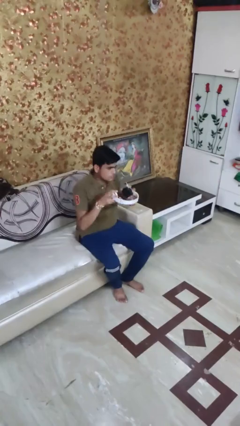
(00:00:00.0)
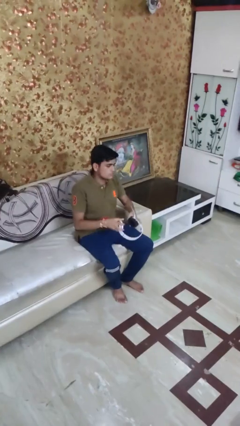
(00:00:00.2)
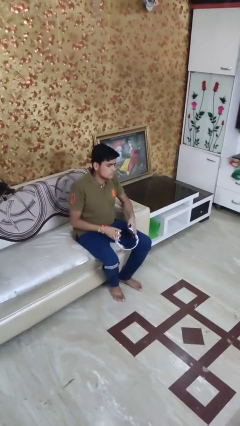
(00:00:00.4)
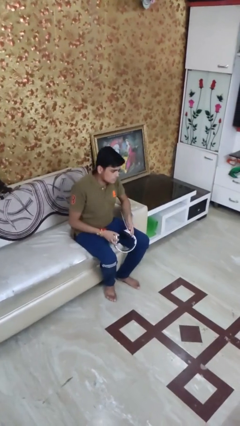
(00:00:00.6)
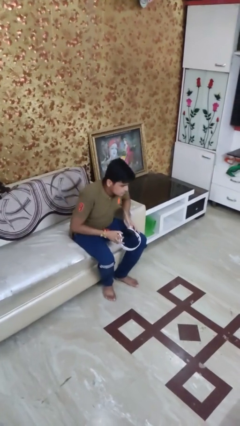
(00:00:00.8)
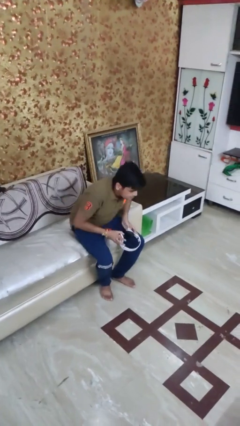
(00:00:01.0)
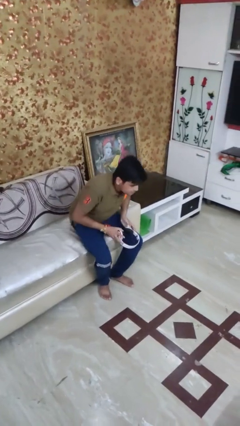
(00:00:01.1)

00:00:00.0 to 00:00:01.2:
person takes off headphones

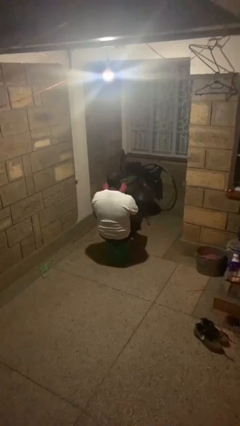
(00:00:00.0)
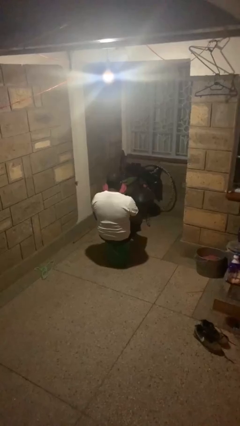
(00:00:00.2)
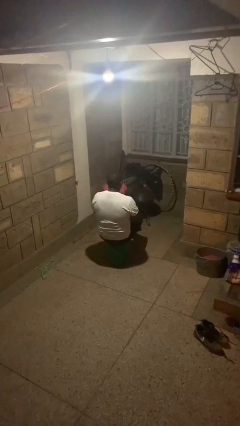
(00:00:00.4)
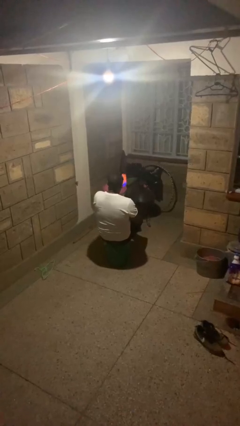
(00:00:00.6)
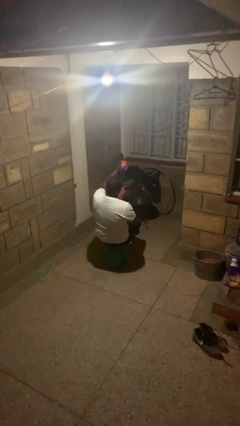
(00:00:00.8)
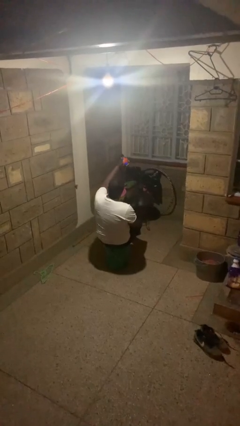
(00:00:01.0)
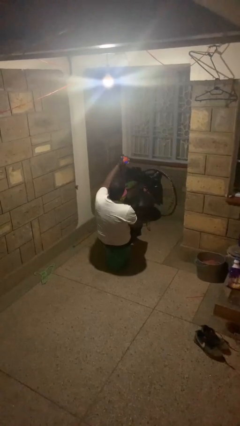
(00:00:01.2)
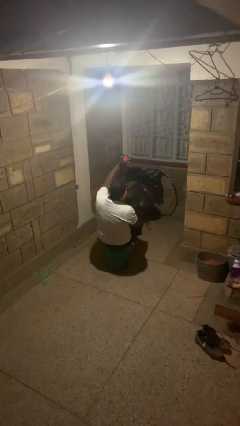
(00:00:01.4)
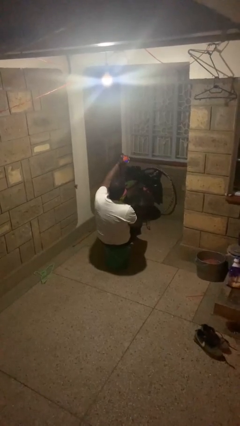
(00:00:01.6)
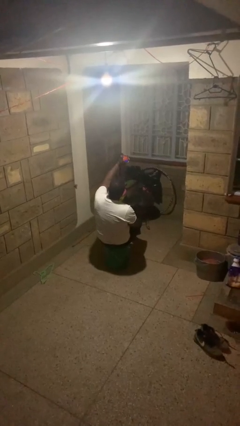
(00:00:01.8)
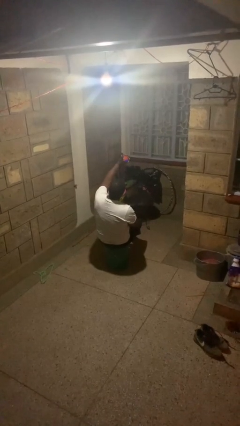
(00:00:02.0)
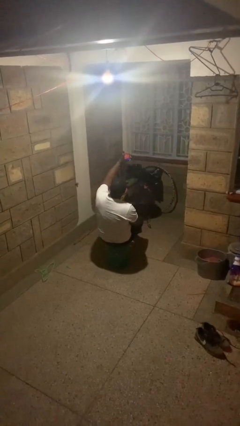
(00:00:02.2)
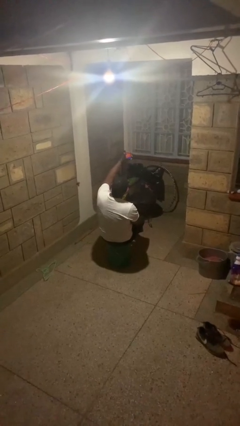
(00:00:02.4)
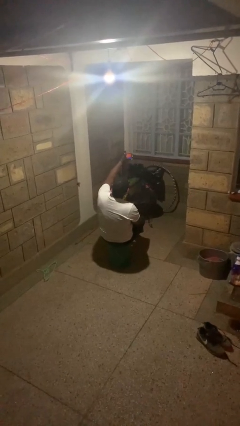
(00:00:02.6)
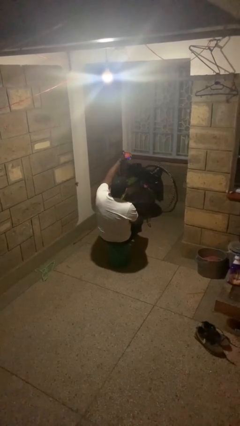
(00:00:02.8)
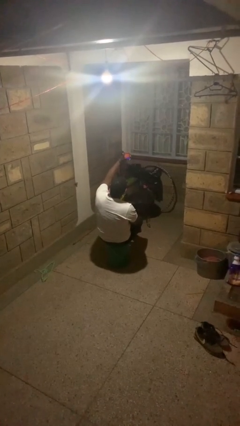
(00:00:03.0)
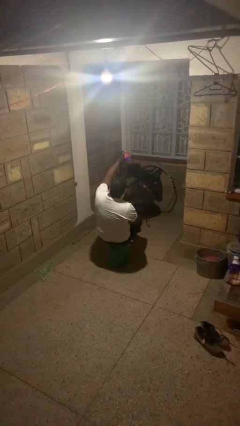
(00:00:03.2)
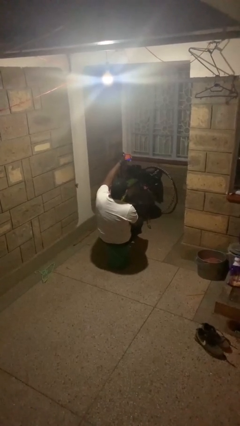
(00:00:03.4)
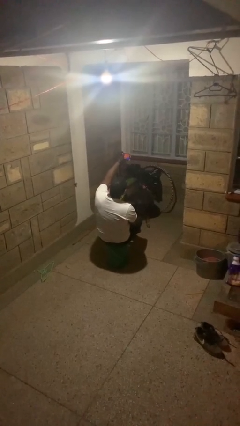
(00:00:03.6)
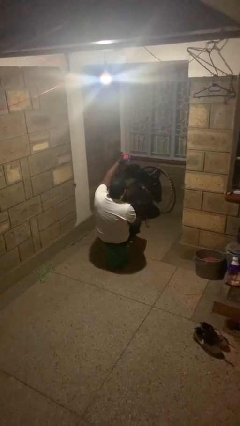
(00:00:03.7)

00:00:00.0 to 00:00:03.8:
person takes selfie

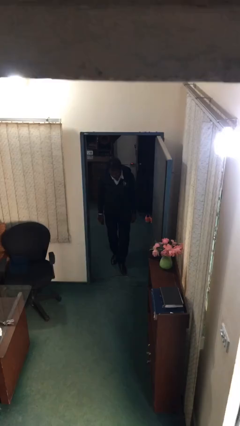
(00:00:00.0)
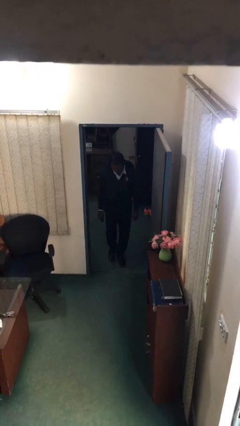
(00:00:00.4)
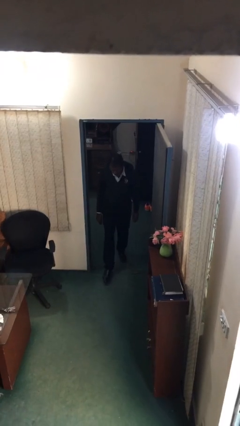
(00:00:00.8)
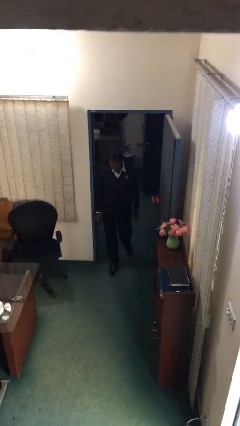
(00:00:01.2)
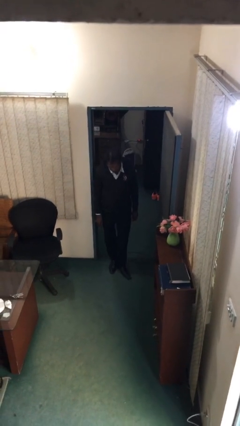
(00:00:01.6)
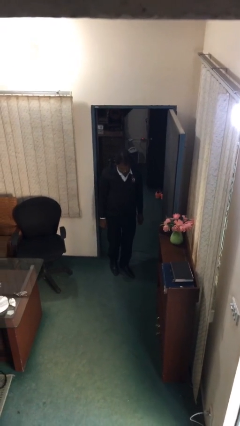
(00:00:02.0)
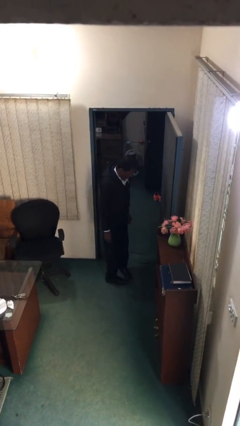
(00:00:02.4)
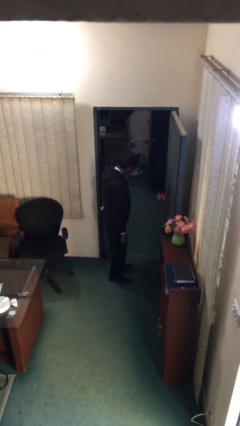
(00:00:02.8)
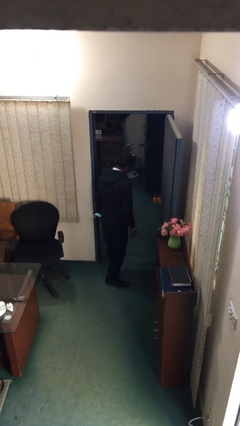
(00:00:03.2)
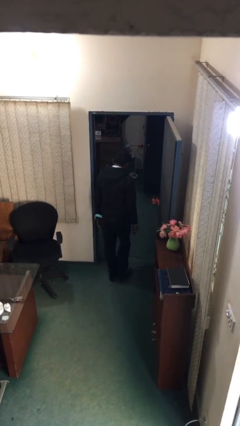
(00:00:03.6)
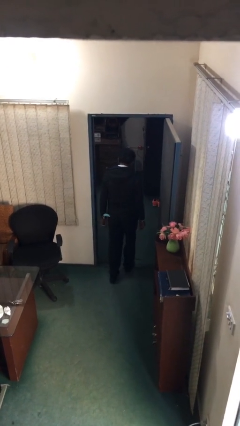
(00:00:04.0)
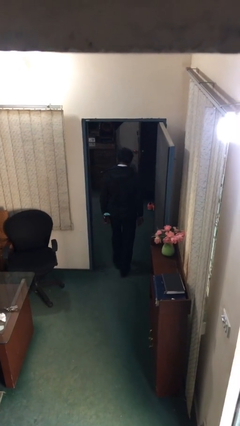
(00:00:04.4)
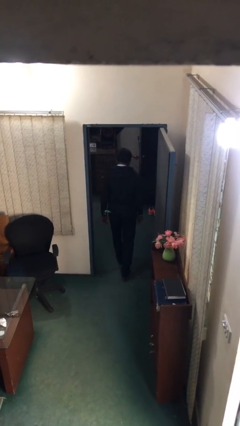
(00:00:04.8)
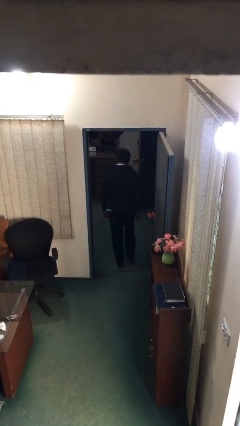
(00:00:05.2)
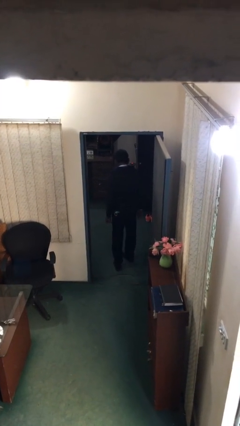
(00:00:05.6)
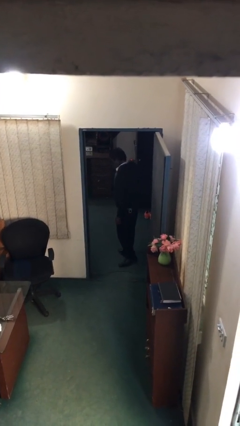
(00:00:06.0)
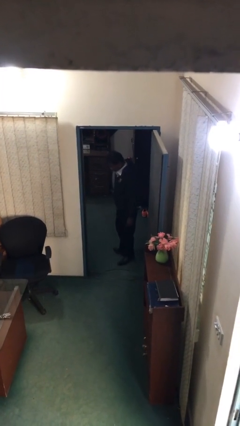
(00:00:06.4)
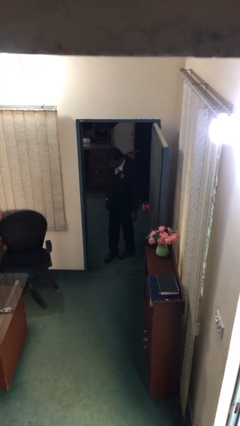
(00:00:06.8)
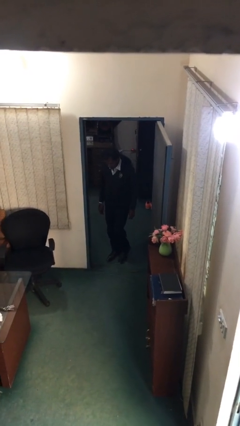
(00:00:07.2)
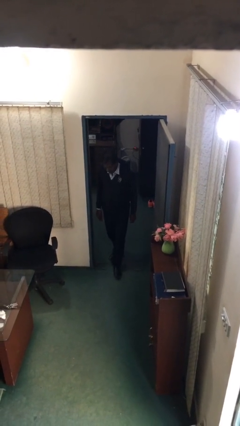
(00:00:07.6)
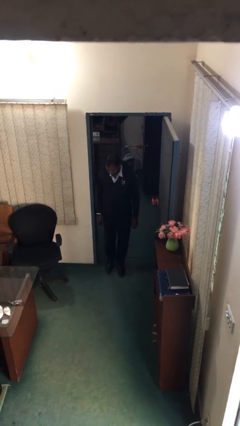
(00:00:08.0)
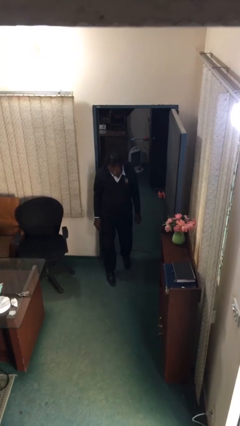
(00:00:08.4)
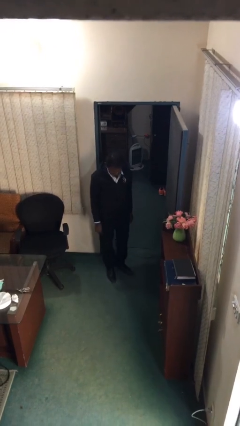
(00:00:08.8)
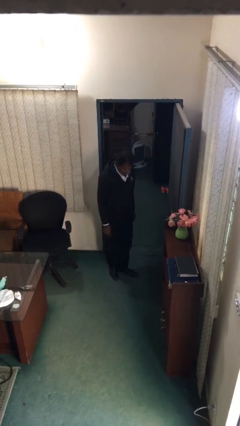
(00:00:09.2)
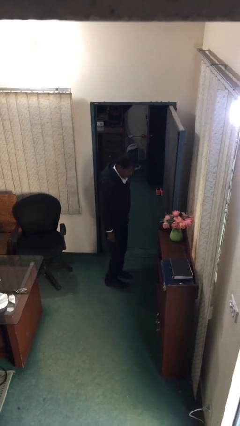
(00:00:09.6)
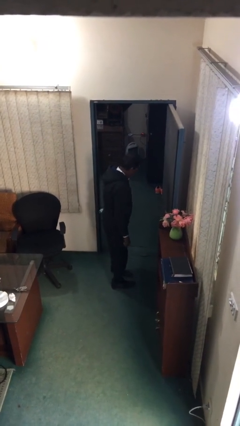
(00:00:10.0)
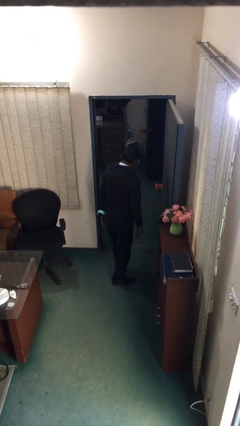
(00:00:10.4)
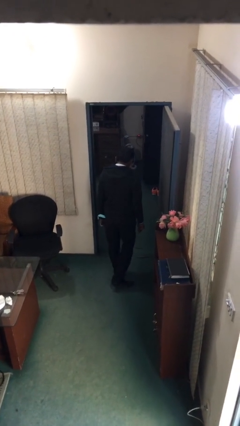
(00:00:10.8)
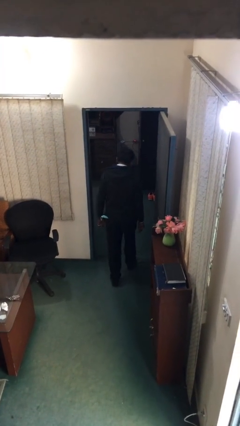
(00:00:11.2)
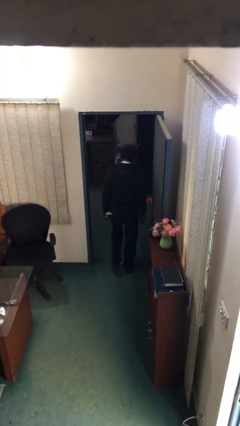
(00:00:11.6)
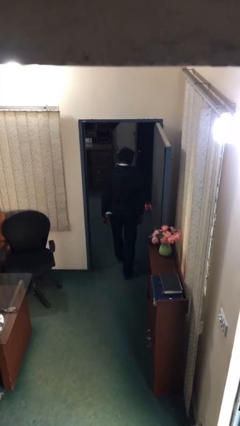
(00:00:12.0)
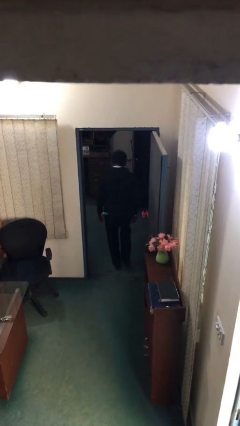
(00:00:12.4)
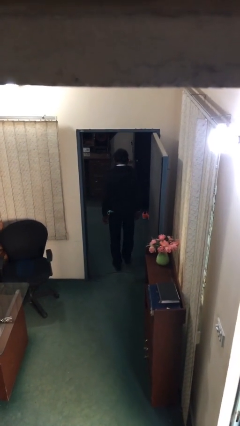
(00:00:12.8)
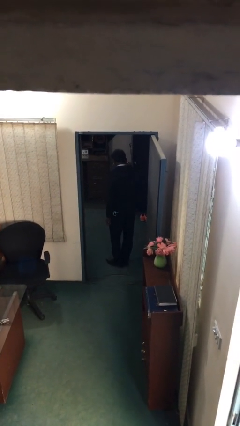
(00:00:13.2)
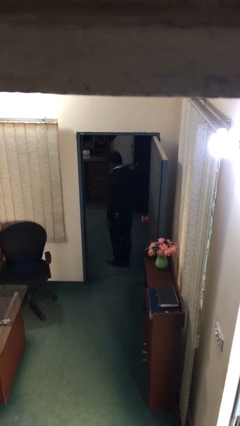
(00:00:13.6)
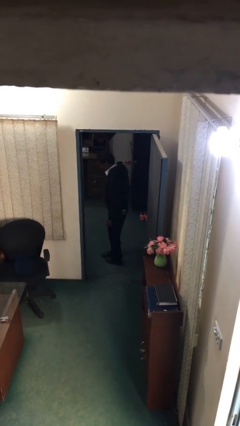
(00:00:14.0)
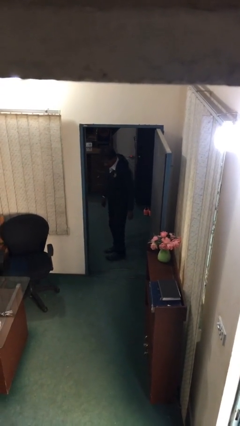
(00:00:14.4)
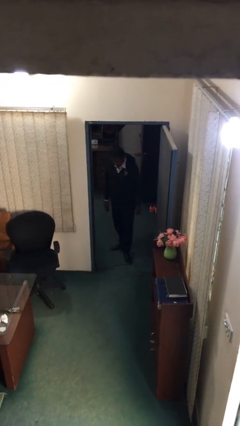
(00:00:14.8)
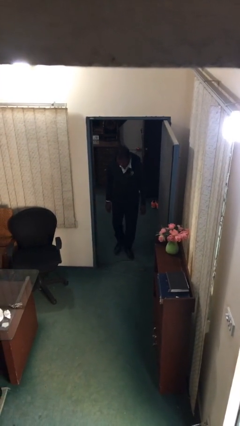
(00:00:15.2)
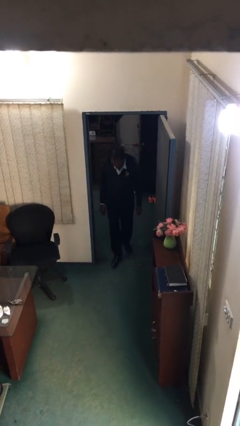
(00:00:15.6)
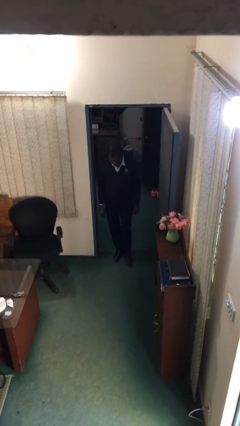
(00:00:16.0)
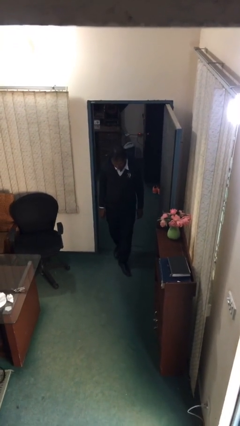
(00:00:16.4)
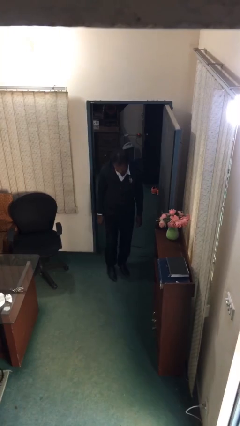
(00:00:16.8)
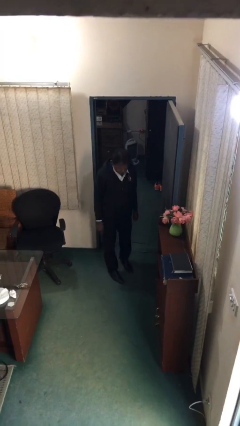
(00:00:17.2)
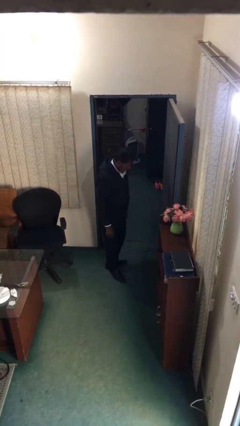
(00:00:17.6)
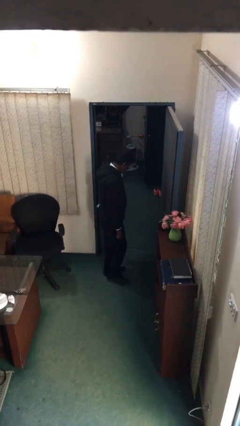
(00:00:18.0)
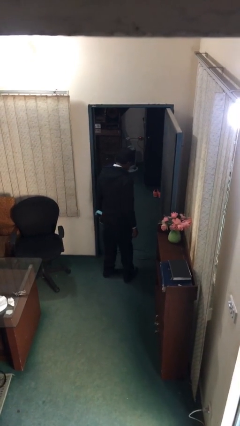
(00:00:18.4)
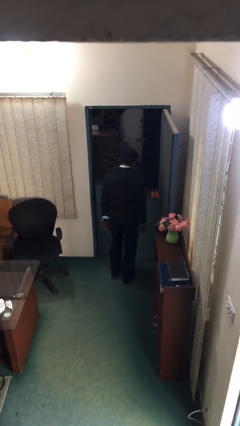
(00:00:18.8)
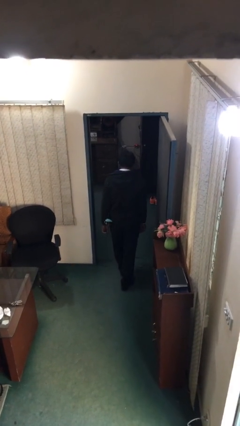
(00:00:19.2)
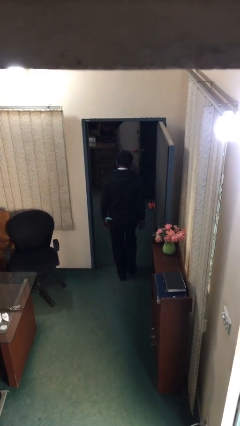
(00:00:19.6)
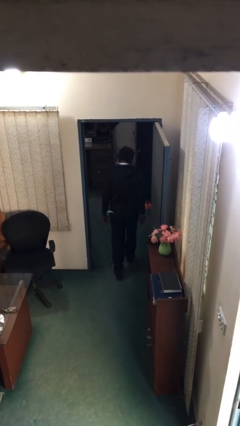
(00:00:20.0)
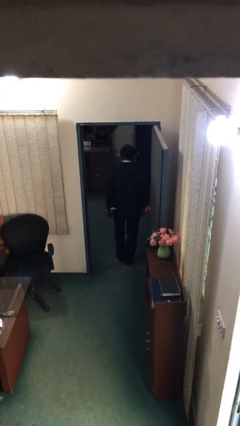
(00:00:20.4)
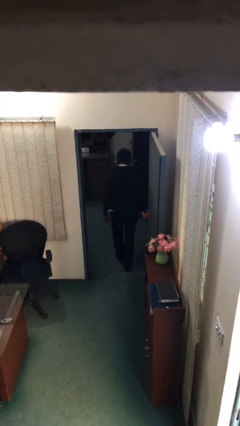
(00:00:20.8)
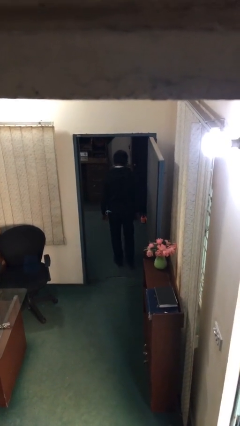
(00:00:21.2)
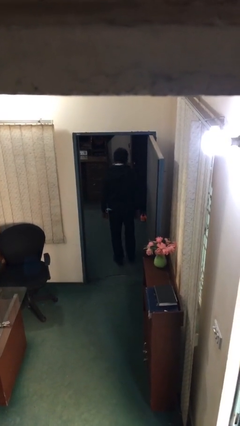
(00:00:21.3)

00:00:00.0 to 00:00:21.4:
person texts on phone

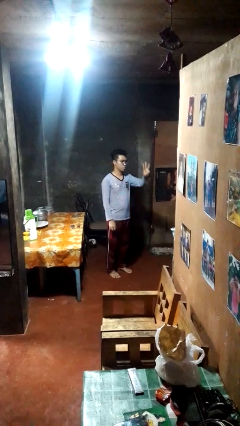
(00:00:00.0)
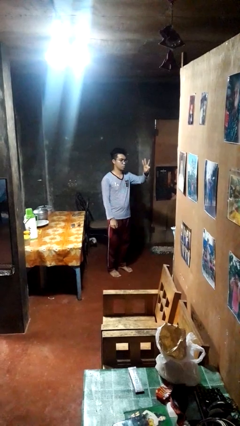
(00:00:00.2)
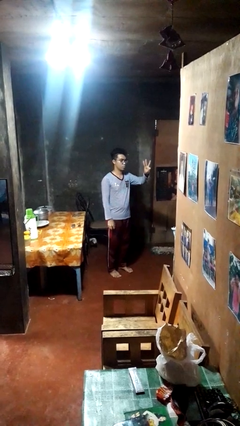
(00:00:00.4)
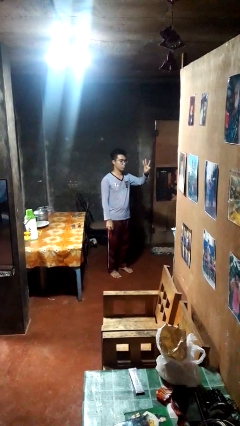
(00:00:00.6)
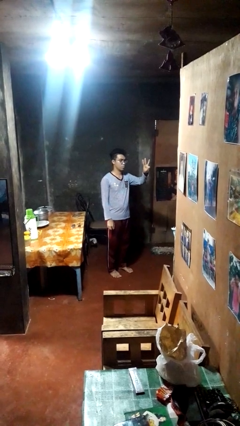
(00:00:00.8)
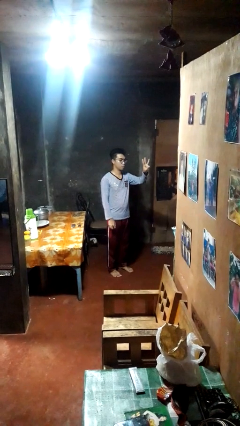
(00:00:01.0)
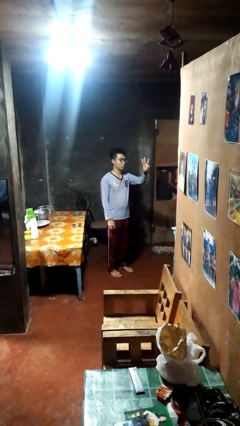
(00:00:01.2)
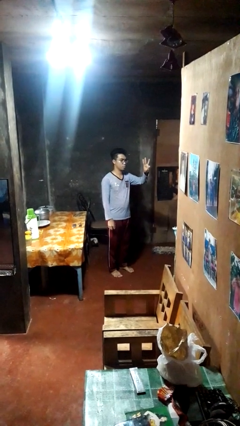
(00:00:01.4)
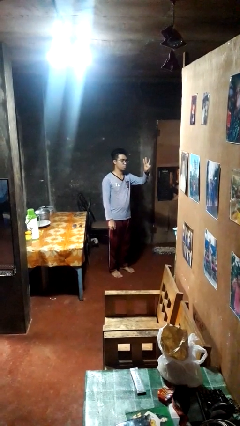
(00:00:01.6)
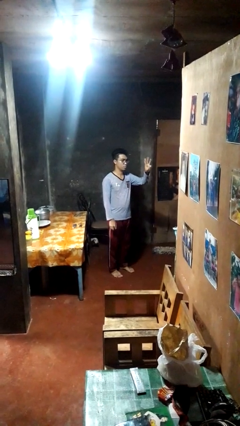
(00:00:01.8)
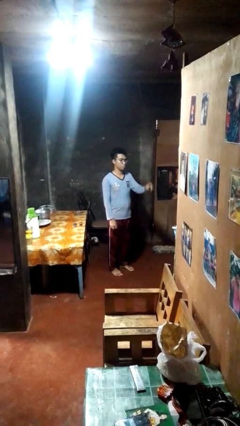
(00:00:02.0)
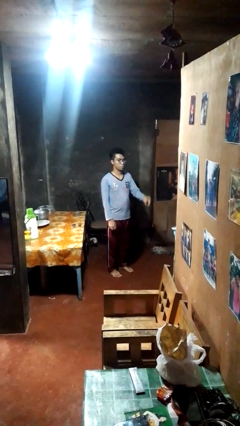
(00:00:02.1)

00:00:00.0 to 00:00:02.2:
person gestures number three
